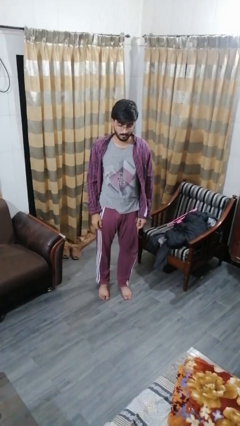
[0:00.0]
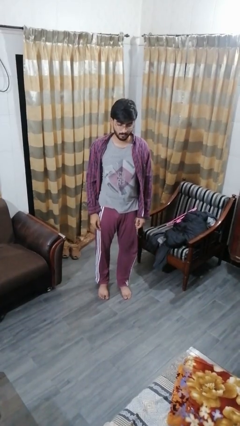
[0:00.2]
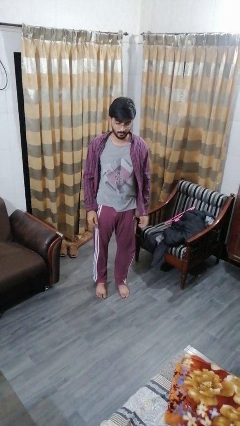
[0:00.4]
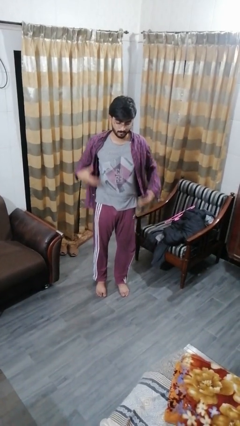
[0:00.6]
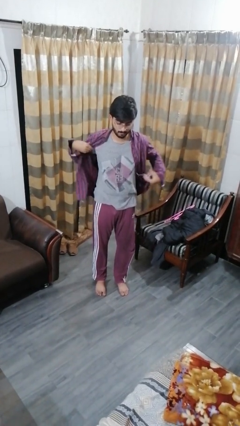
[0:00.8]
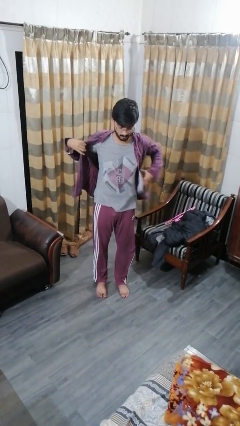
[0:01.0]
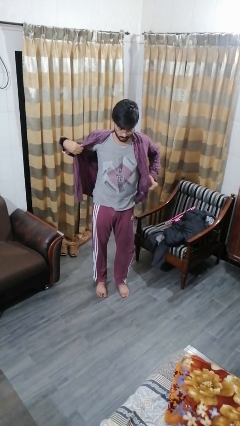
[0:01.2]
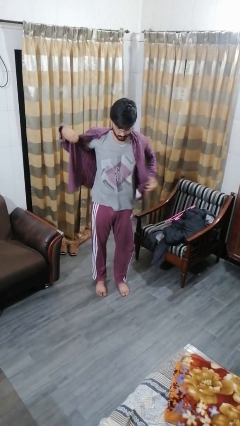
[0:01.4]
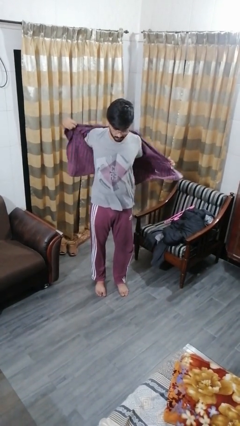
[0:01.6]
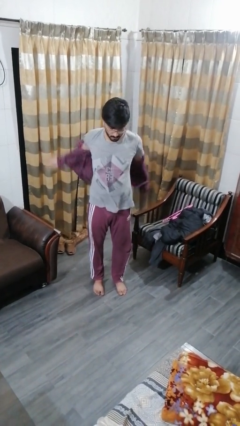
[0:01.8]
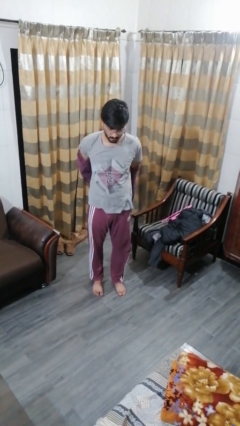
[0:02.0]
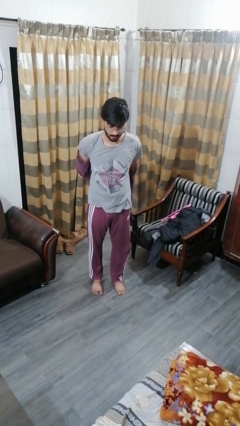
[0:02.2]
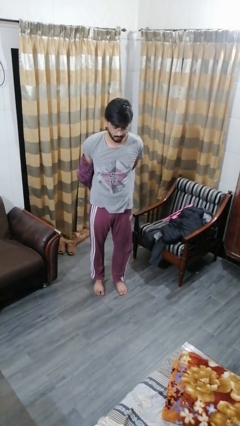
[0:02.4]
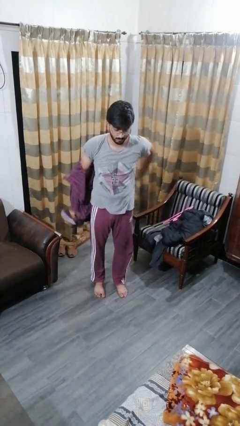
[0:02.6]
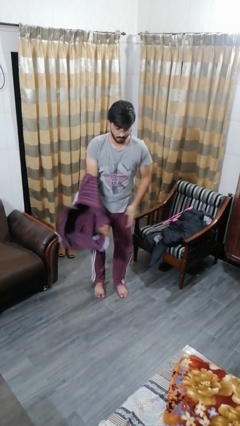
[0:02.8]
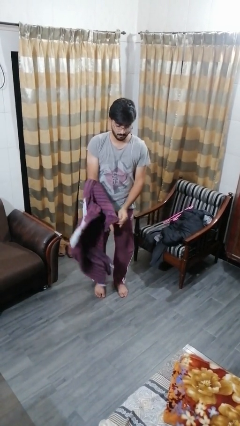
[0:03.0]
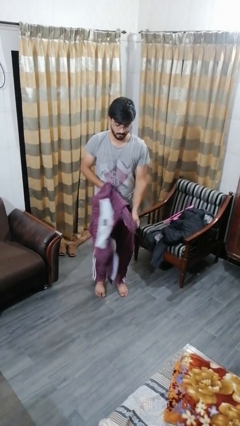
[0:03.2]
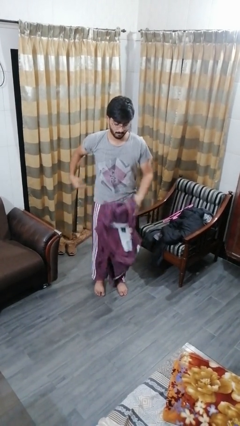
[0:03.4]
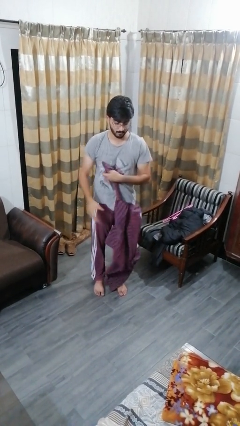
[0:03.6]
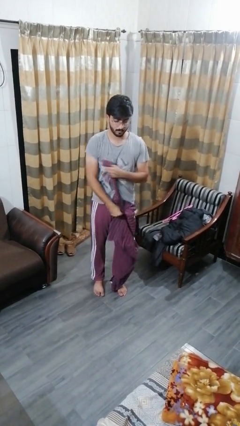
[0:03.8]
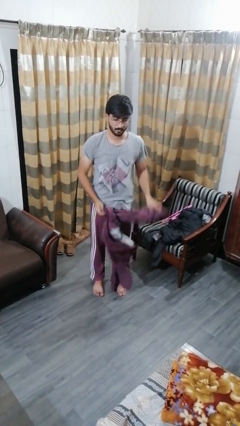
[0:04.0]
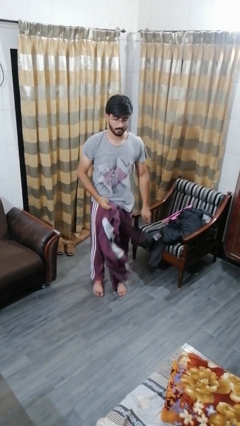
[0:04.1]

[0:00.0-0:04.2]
person takes off shirt

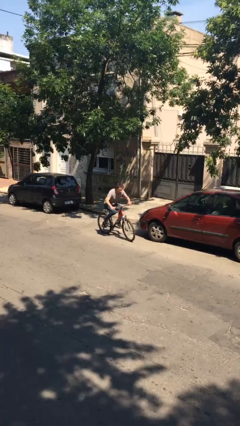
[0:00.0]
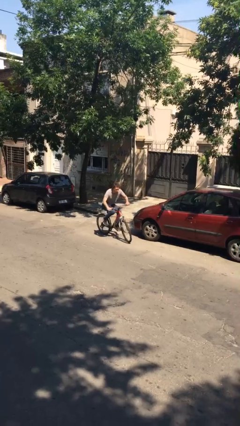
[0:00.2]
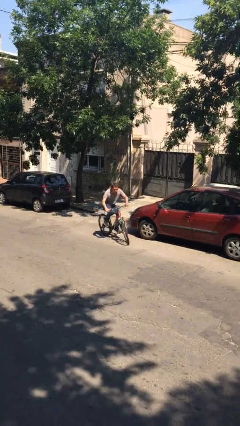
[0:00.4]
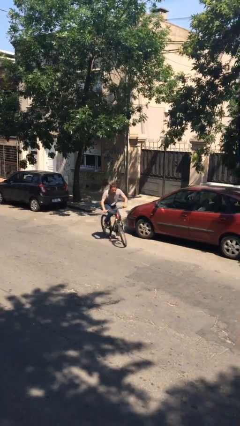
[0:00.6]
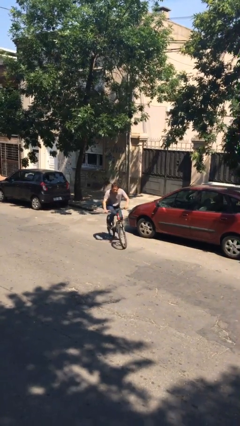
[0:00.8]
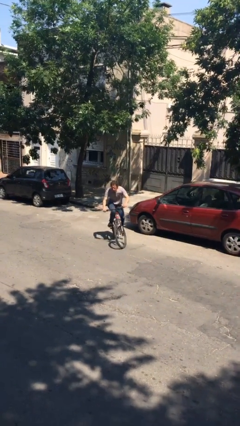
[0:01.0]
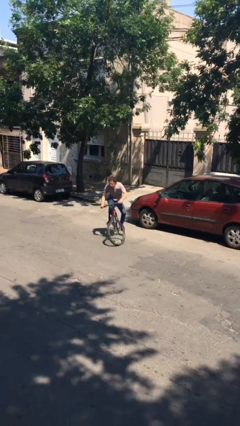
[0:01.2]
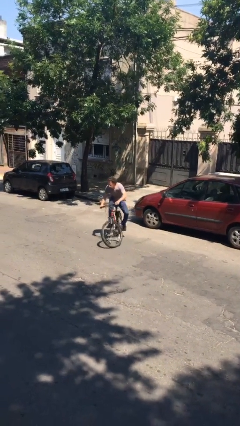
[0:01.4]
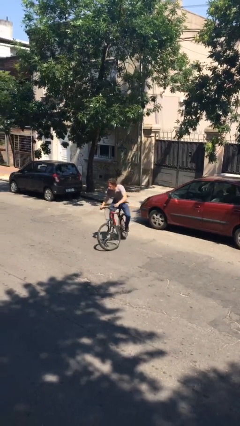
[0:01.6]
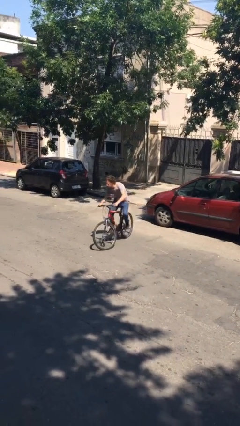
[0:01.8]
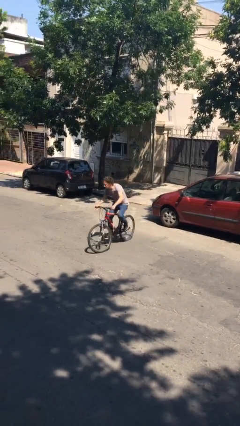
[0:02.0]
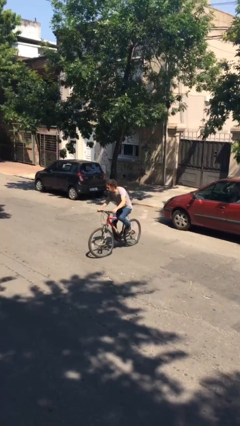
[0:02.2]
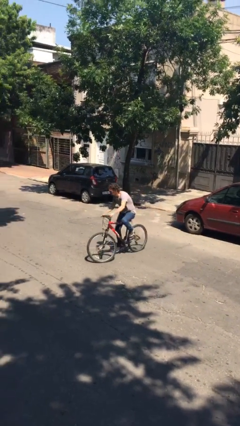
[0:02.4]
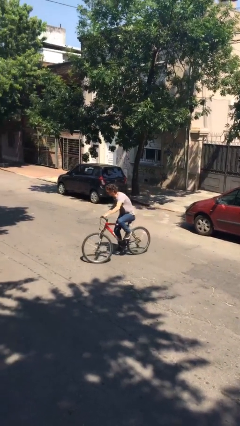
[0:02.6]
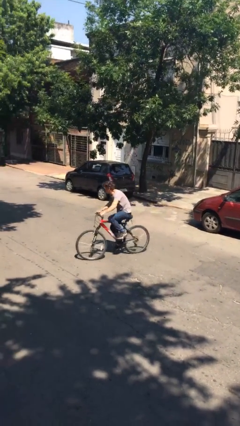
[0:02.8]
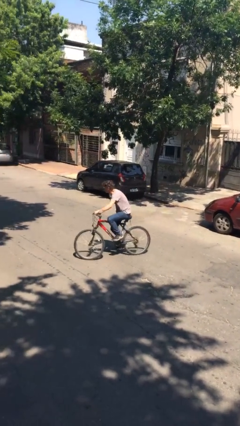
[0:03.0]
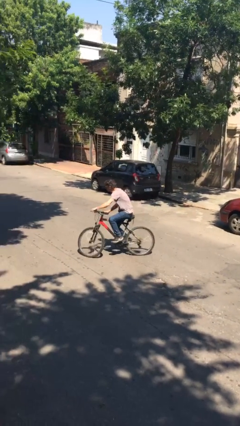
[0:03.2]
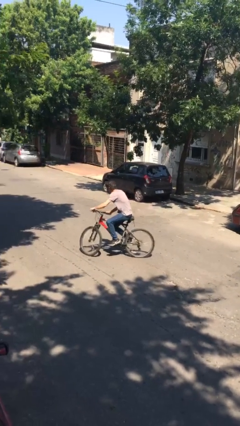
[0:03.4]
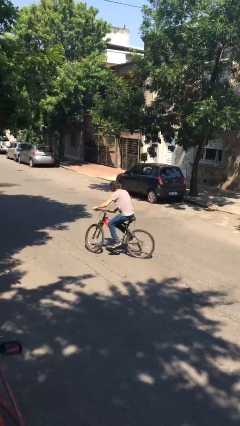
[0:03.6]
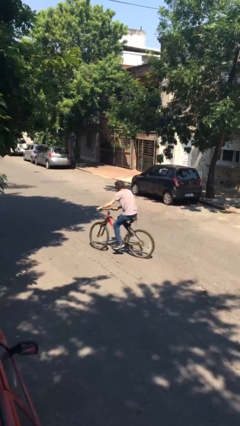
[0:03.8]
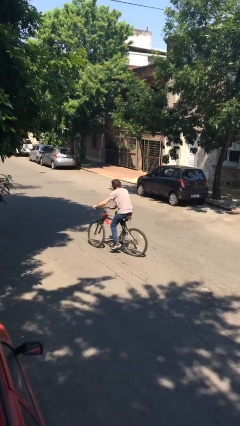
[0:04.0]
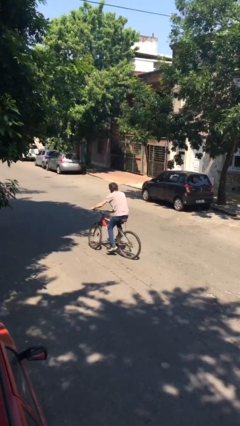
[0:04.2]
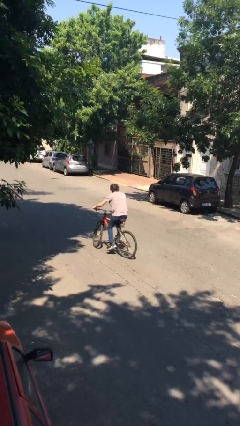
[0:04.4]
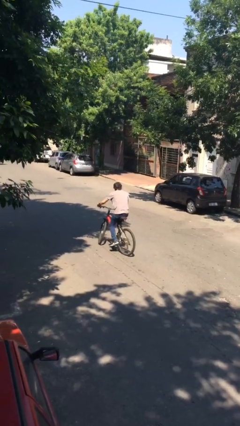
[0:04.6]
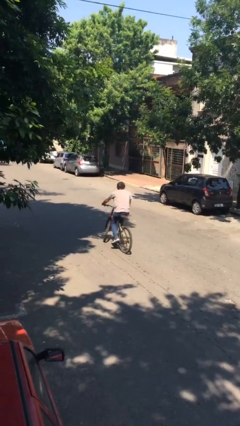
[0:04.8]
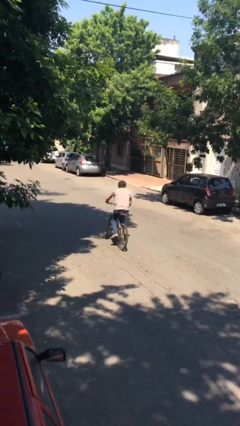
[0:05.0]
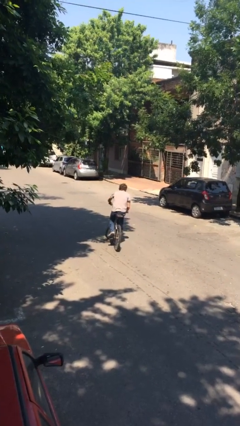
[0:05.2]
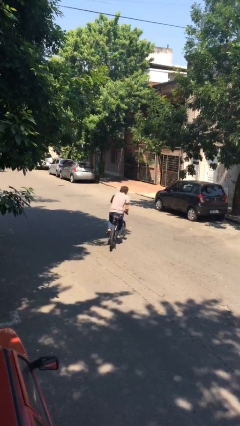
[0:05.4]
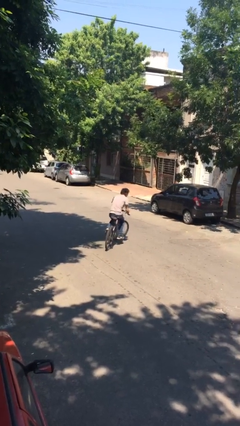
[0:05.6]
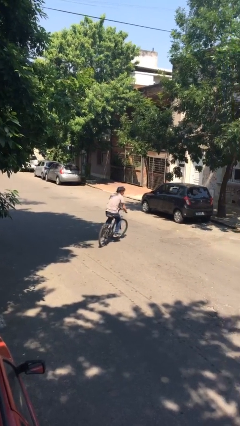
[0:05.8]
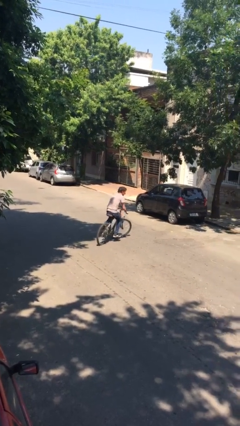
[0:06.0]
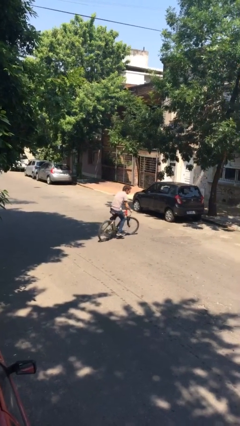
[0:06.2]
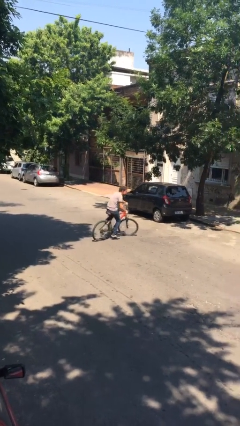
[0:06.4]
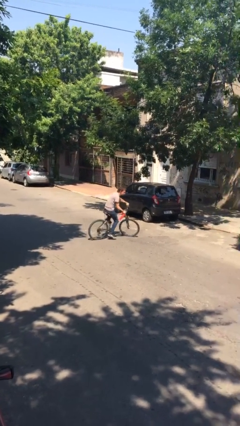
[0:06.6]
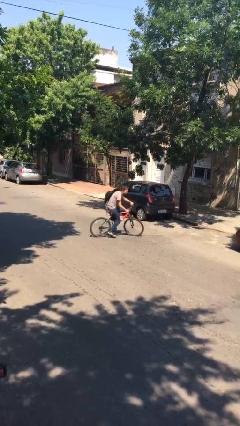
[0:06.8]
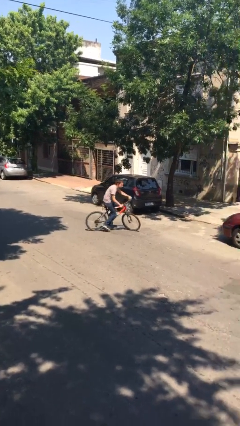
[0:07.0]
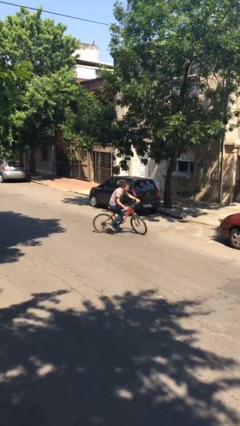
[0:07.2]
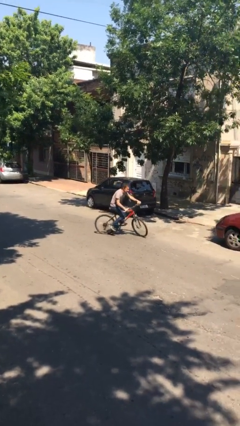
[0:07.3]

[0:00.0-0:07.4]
person rides bicycle

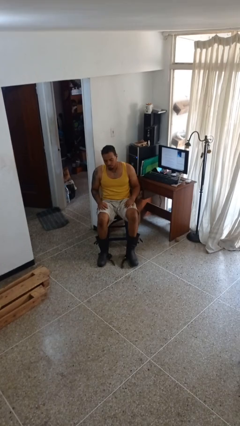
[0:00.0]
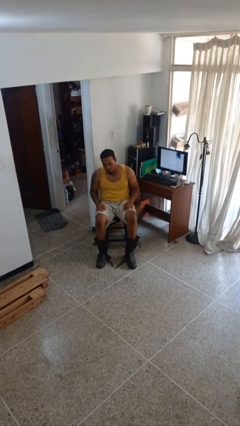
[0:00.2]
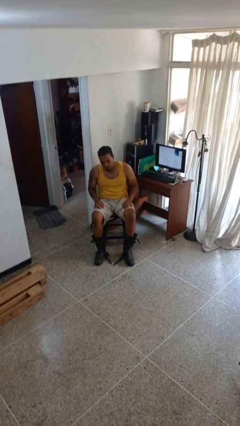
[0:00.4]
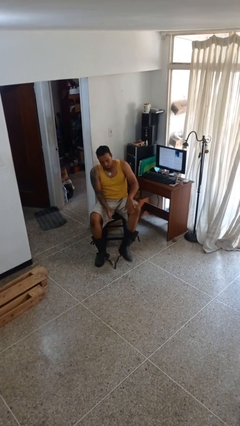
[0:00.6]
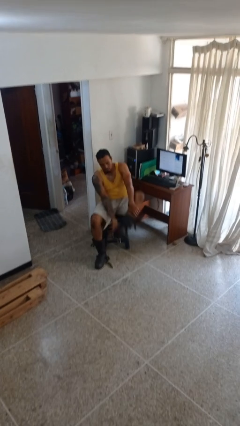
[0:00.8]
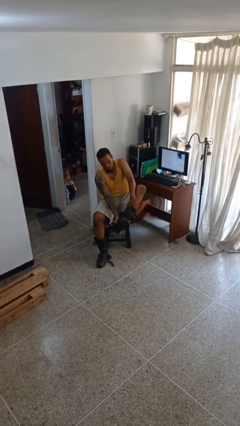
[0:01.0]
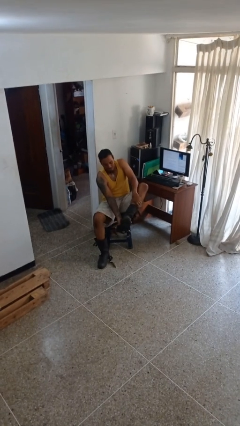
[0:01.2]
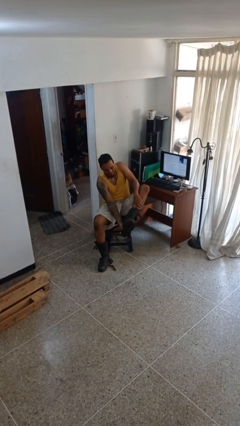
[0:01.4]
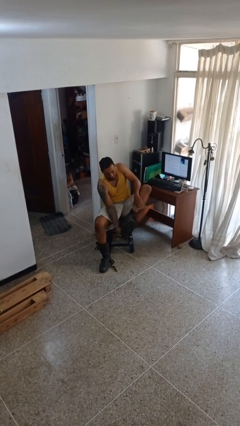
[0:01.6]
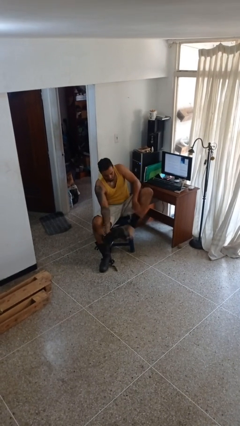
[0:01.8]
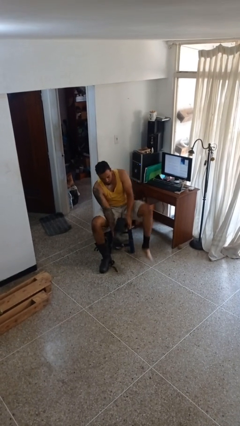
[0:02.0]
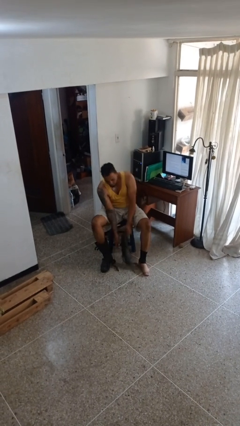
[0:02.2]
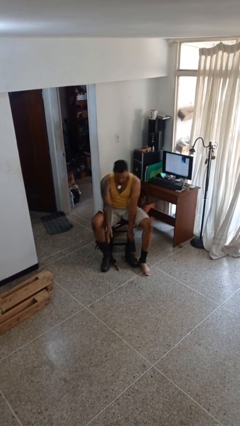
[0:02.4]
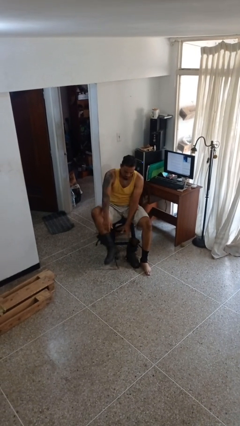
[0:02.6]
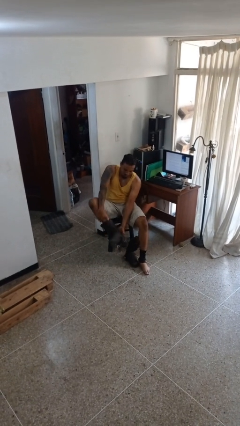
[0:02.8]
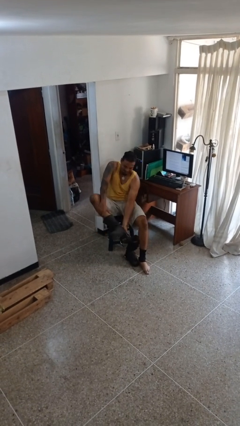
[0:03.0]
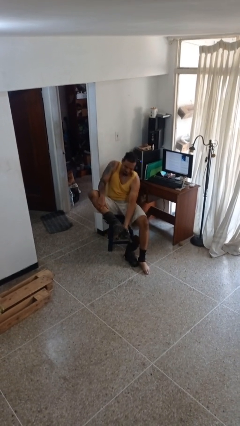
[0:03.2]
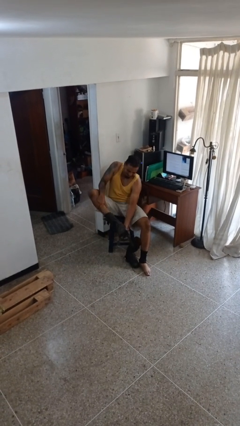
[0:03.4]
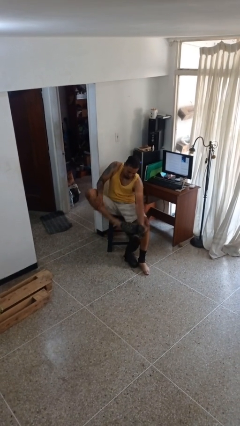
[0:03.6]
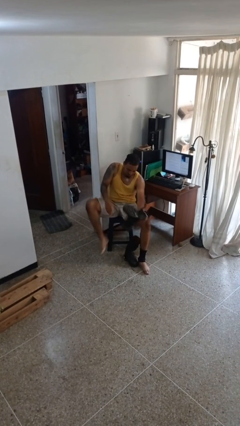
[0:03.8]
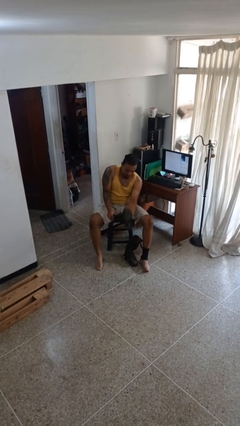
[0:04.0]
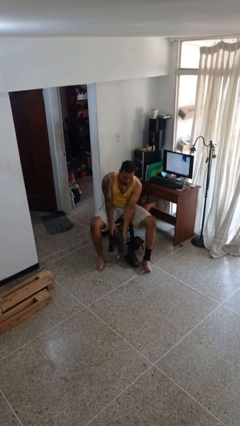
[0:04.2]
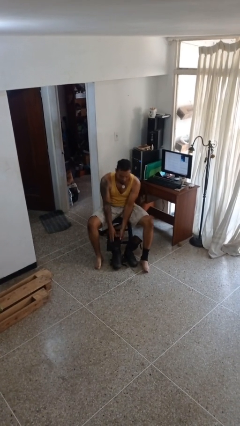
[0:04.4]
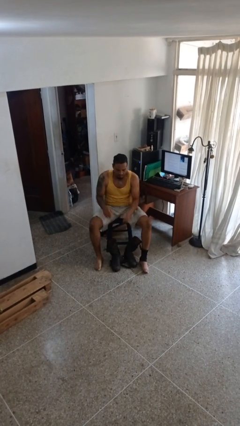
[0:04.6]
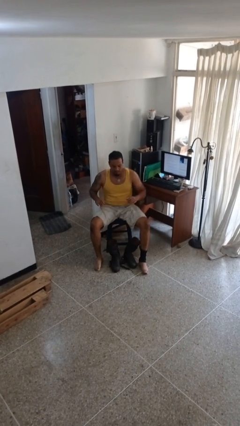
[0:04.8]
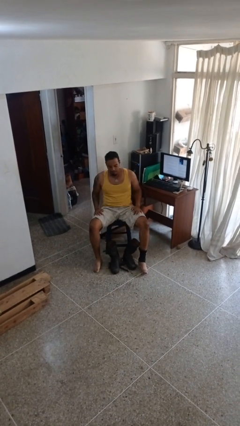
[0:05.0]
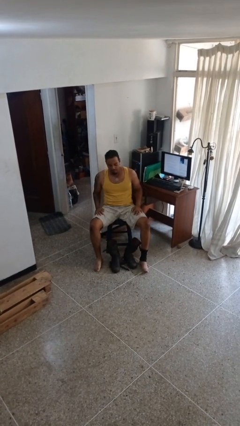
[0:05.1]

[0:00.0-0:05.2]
person takes off boots

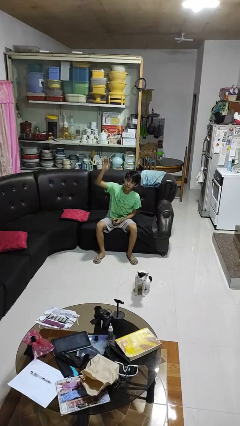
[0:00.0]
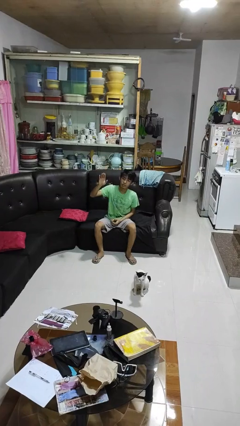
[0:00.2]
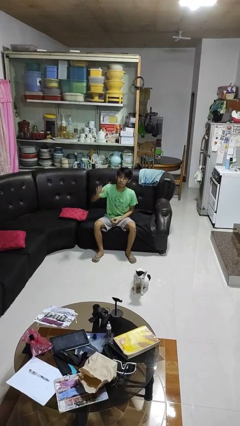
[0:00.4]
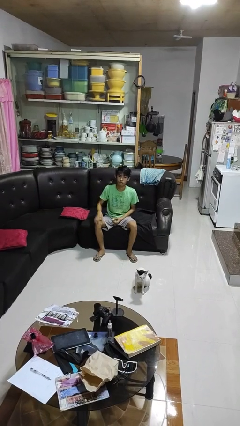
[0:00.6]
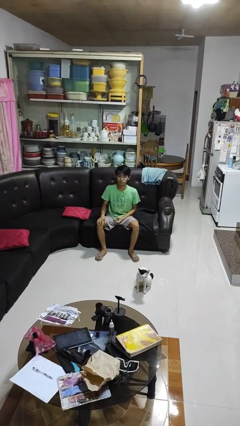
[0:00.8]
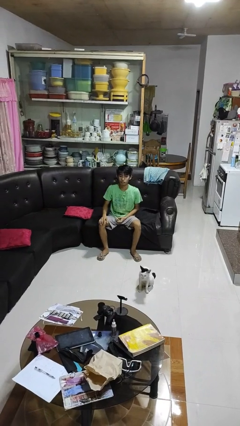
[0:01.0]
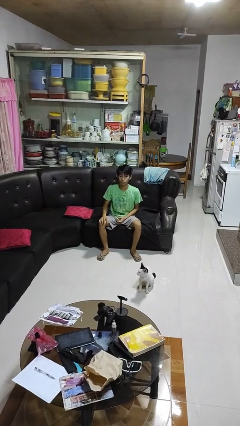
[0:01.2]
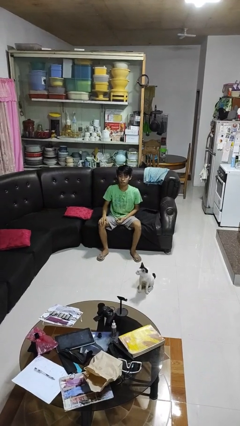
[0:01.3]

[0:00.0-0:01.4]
person gestures lower hand
